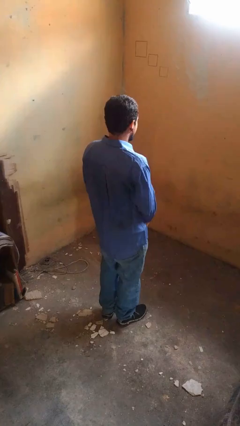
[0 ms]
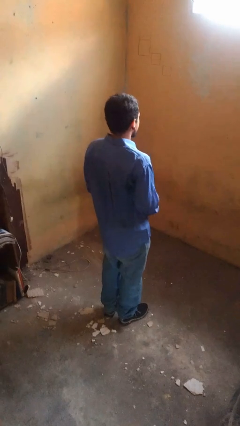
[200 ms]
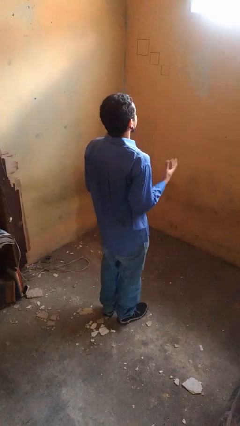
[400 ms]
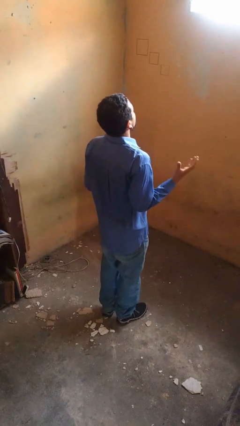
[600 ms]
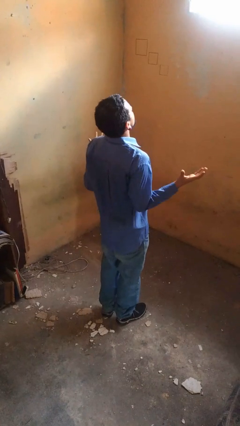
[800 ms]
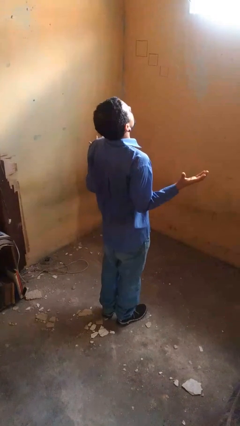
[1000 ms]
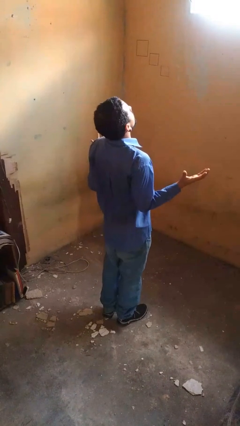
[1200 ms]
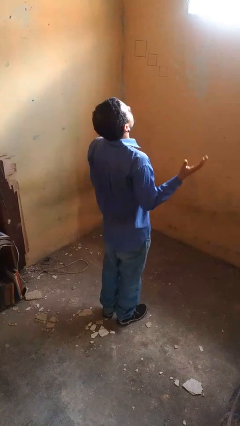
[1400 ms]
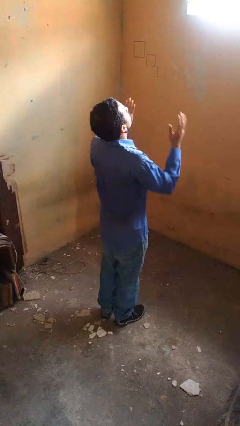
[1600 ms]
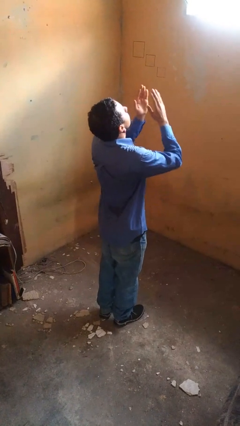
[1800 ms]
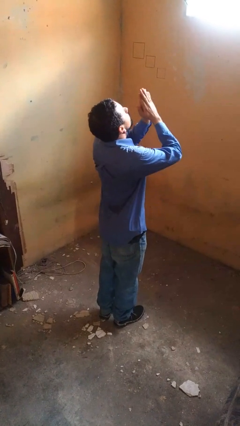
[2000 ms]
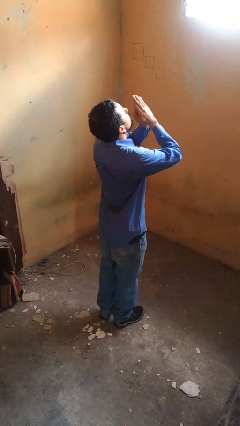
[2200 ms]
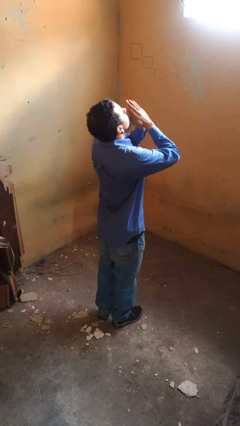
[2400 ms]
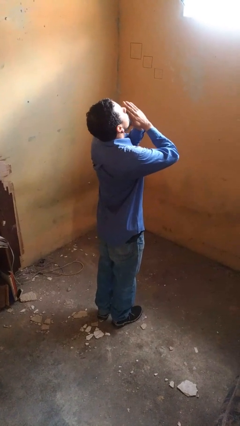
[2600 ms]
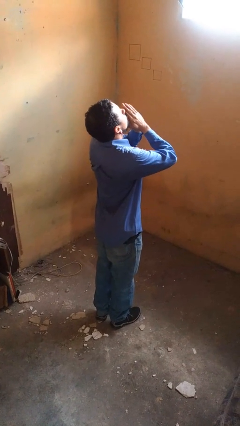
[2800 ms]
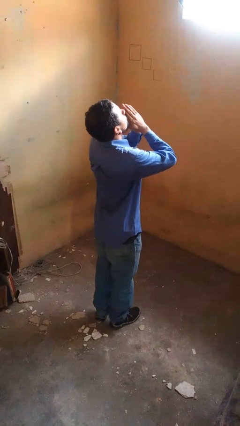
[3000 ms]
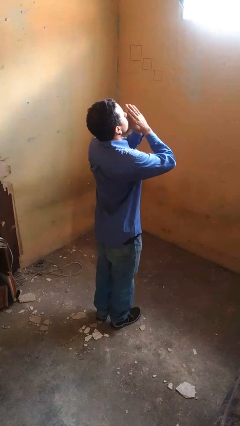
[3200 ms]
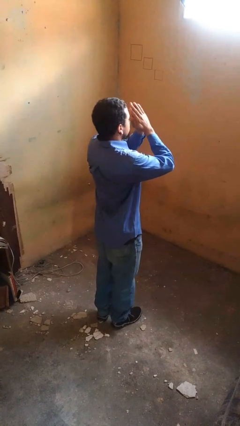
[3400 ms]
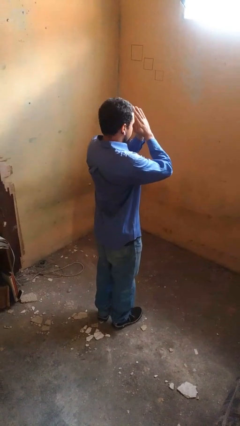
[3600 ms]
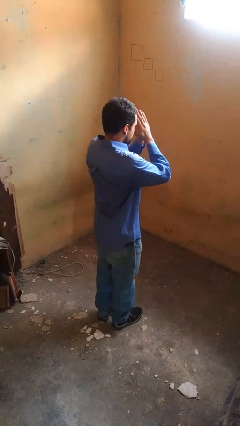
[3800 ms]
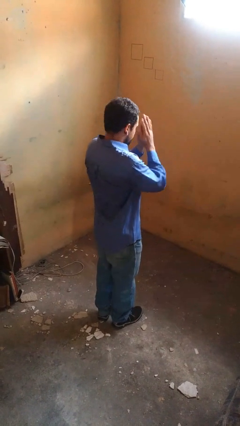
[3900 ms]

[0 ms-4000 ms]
person prays

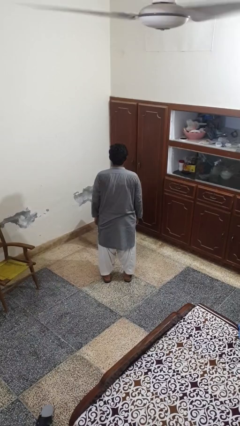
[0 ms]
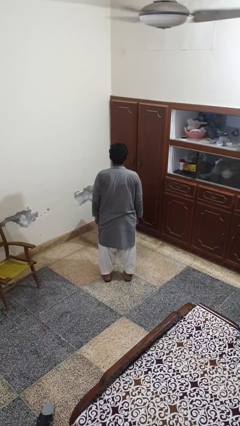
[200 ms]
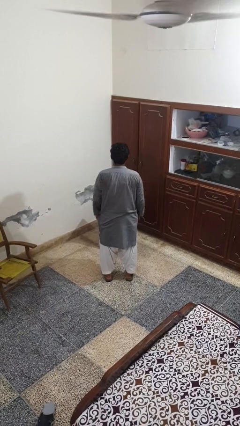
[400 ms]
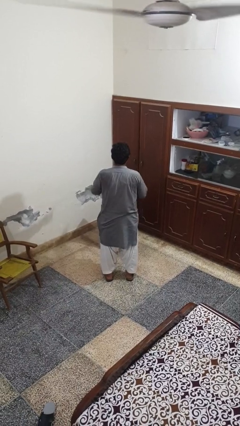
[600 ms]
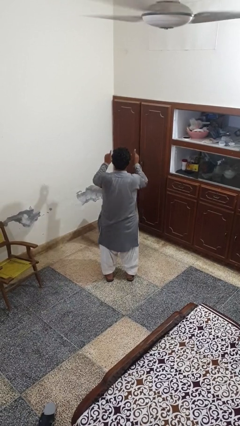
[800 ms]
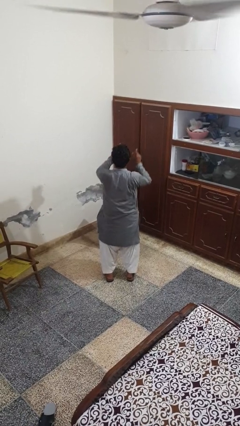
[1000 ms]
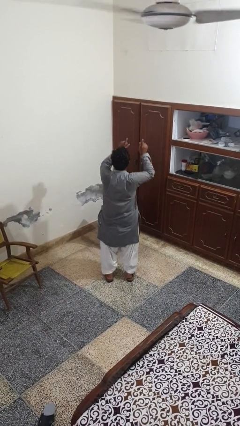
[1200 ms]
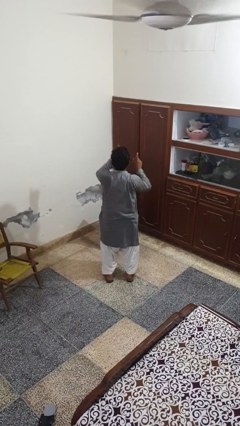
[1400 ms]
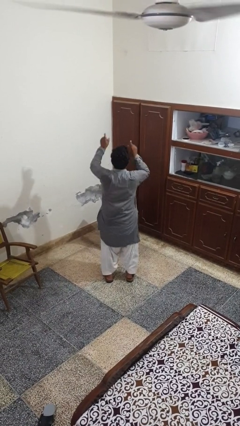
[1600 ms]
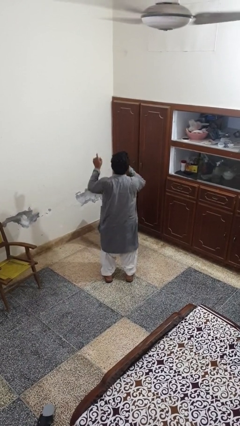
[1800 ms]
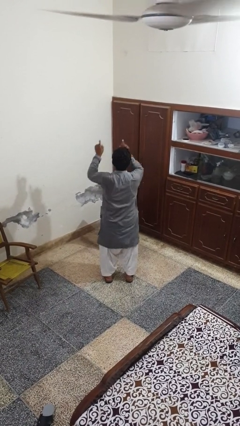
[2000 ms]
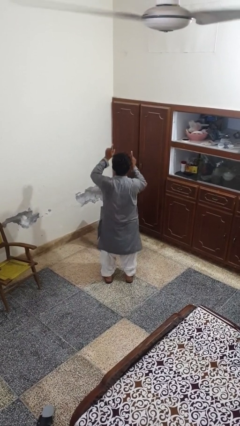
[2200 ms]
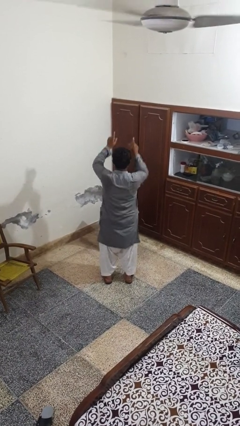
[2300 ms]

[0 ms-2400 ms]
person dances in place

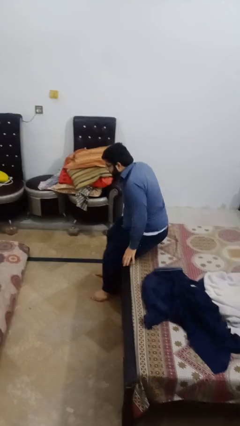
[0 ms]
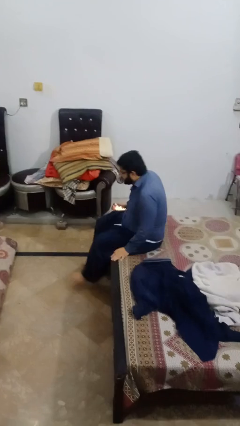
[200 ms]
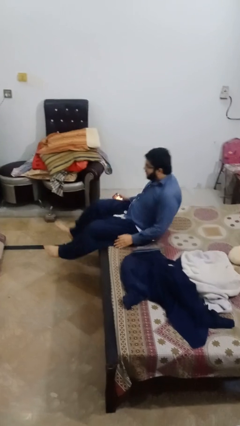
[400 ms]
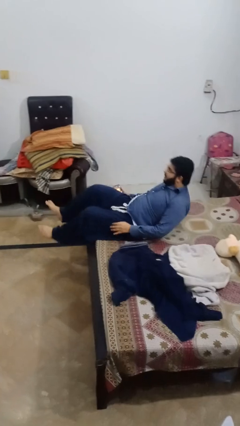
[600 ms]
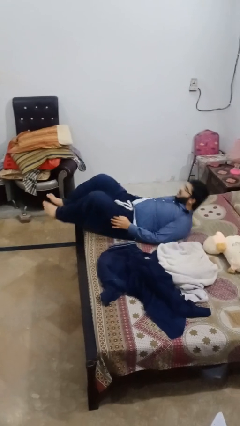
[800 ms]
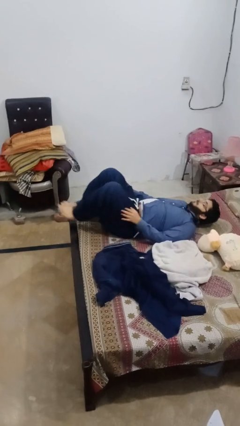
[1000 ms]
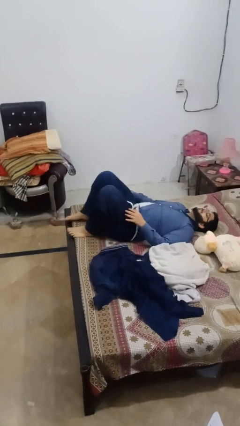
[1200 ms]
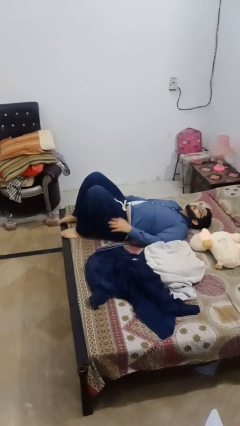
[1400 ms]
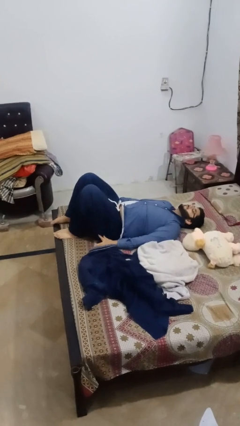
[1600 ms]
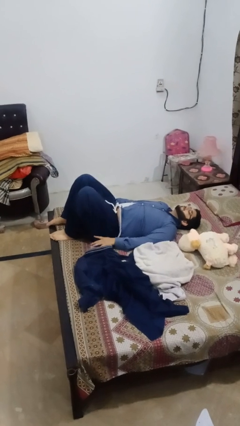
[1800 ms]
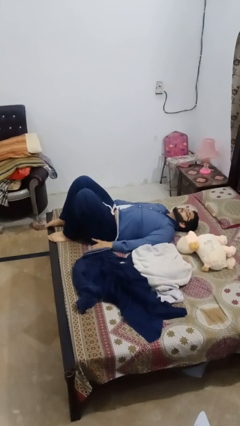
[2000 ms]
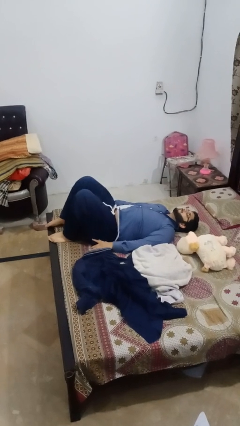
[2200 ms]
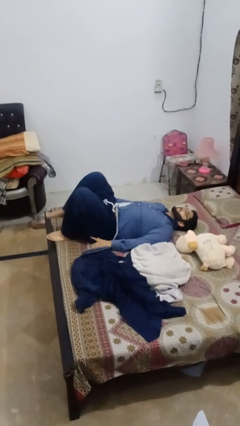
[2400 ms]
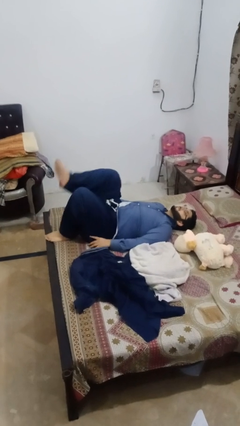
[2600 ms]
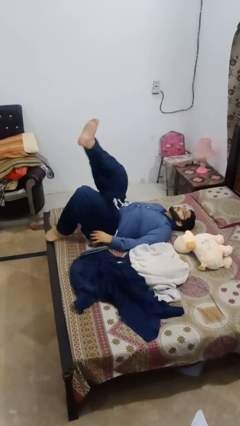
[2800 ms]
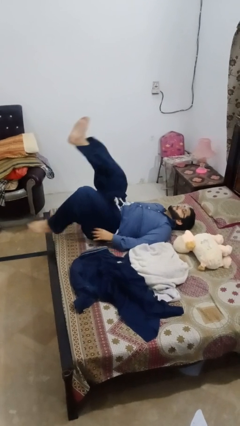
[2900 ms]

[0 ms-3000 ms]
person lies down on bed

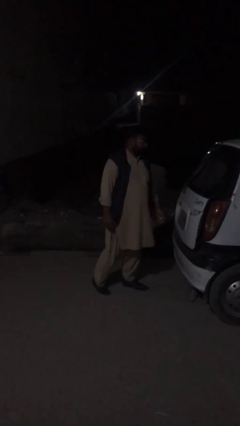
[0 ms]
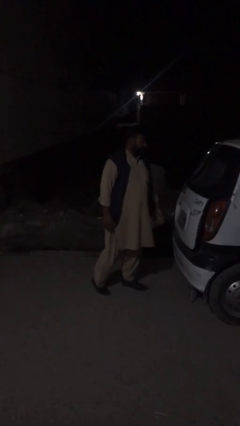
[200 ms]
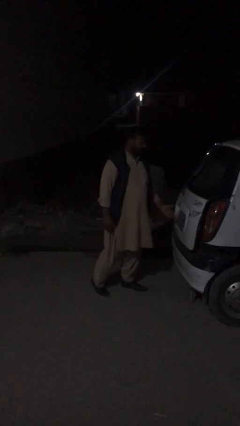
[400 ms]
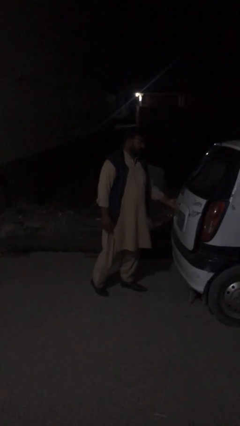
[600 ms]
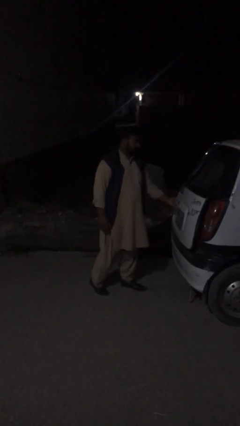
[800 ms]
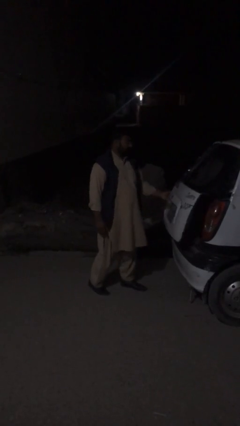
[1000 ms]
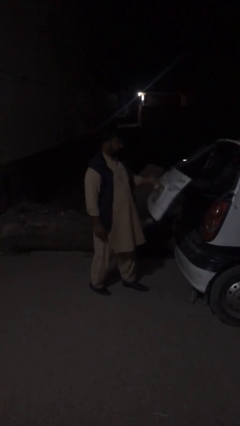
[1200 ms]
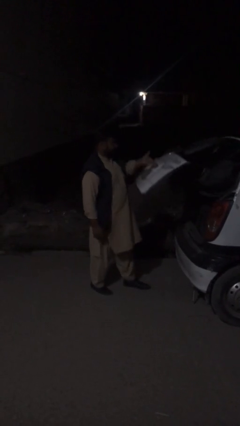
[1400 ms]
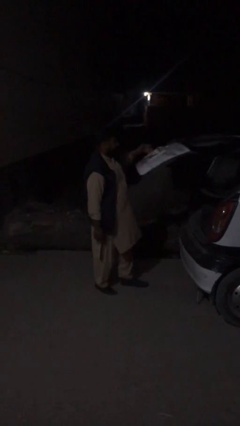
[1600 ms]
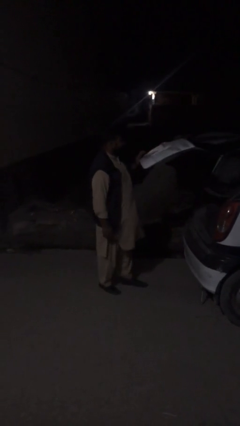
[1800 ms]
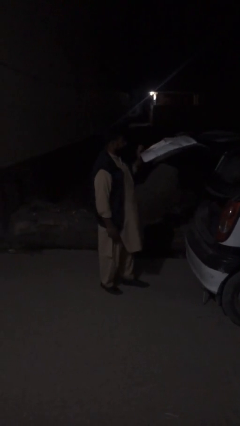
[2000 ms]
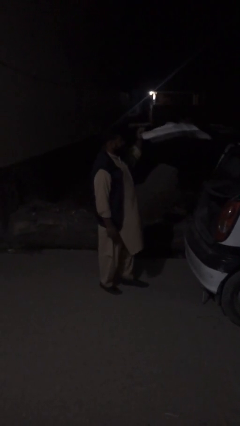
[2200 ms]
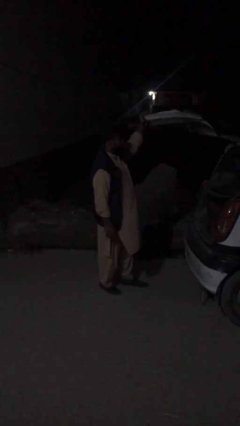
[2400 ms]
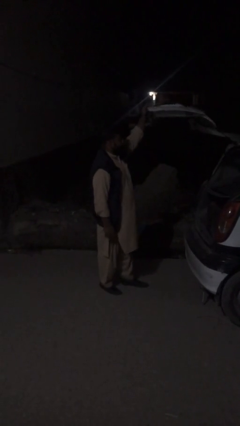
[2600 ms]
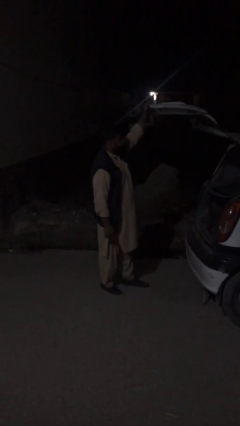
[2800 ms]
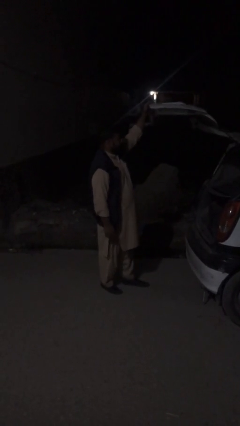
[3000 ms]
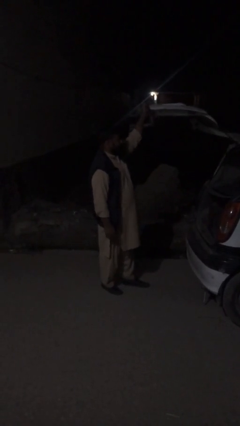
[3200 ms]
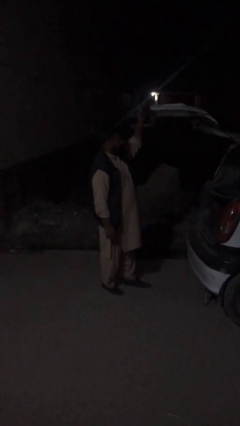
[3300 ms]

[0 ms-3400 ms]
person opens car trunk

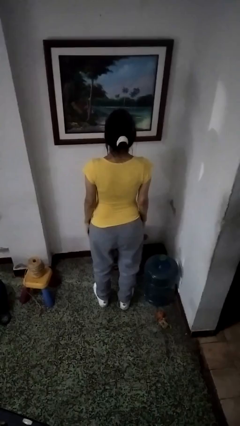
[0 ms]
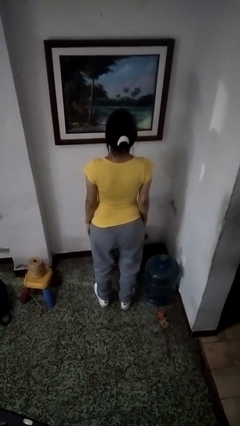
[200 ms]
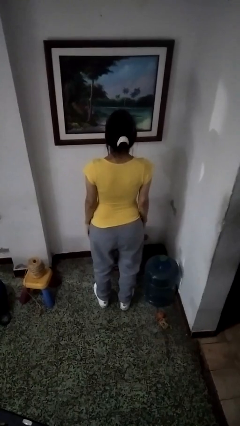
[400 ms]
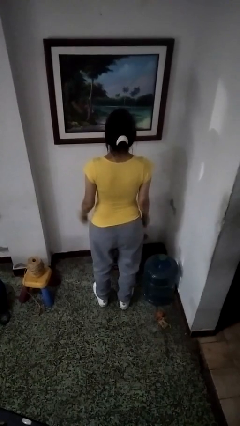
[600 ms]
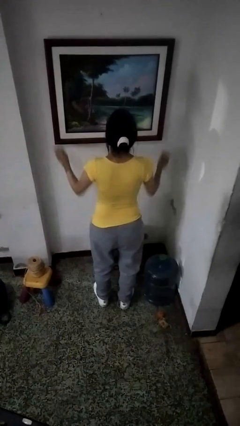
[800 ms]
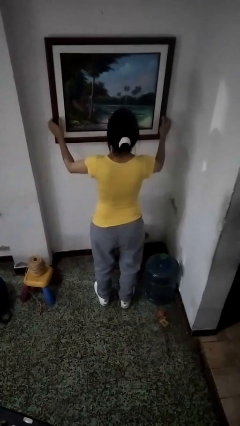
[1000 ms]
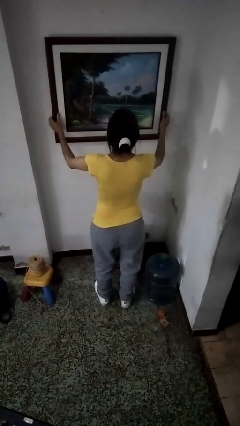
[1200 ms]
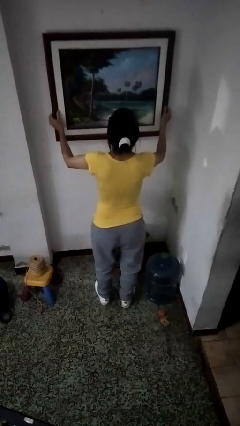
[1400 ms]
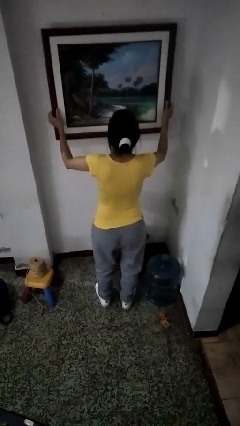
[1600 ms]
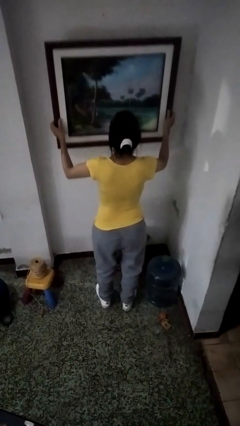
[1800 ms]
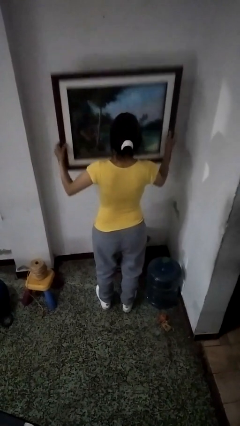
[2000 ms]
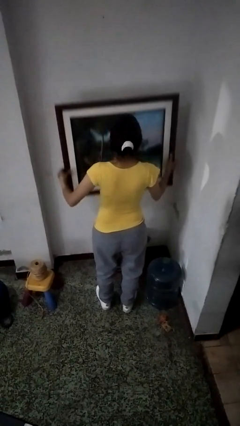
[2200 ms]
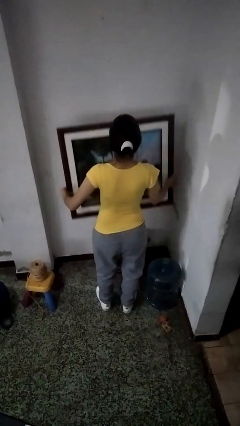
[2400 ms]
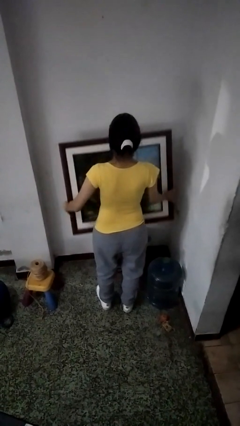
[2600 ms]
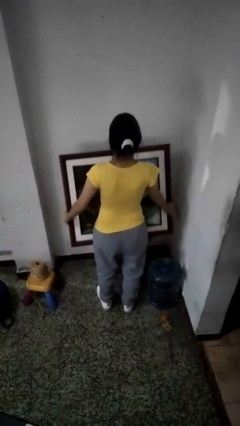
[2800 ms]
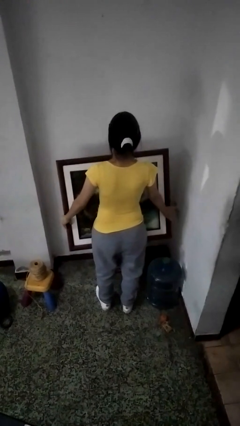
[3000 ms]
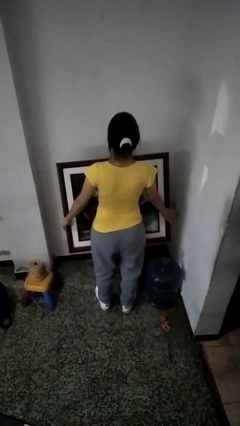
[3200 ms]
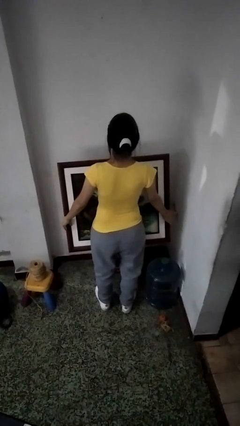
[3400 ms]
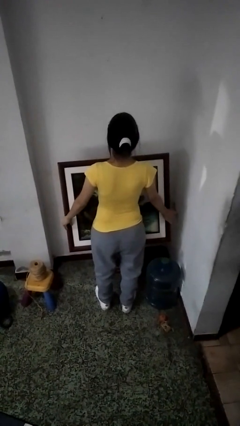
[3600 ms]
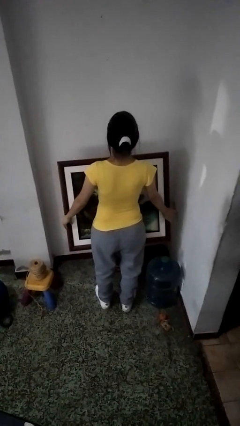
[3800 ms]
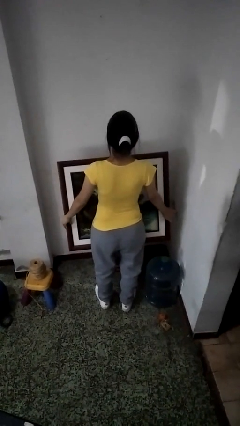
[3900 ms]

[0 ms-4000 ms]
person takes down picture frame

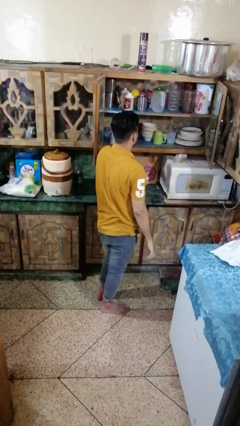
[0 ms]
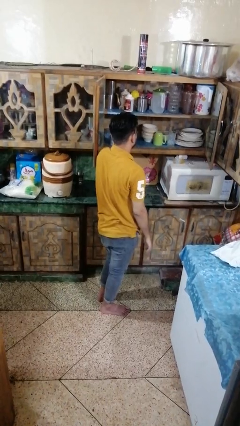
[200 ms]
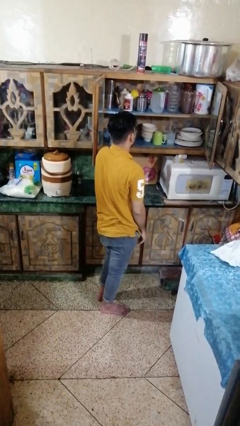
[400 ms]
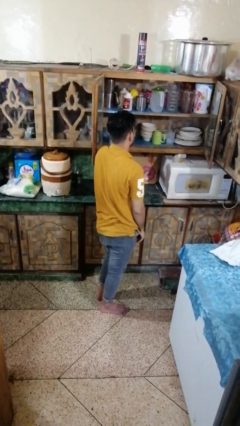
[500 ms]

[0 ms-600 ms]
person takes object from cabinet
